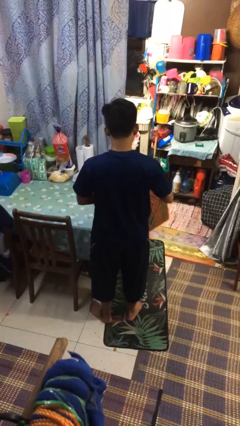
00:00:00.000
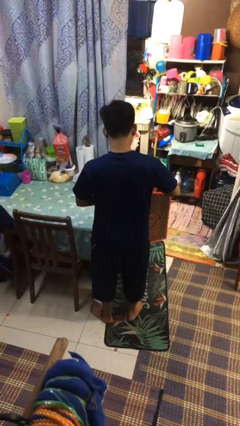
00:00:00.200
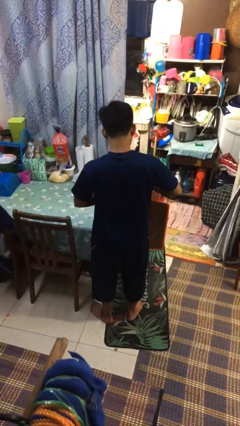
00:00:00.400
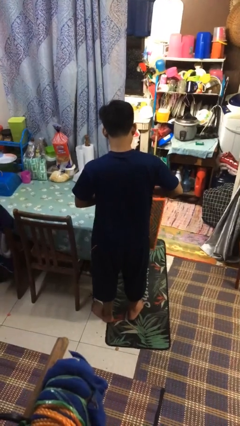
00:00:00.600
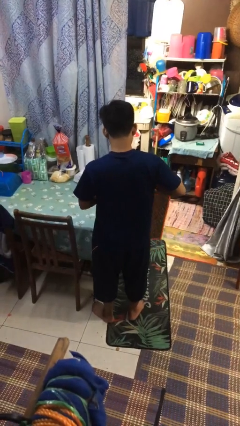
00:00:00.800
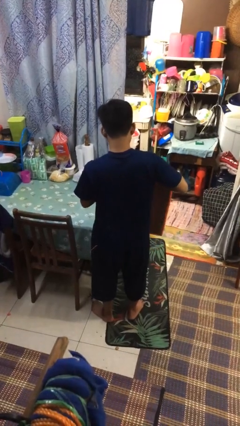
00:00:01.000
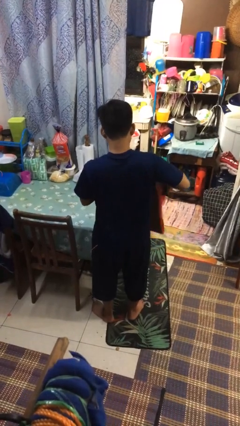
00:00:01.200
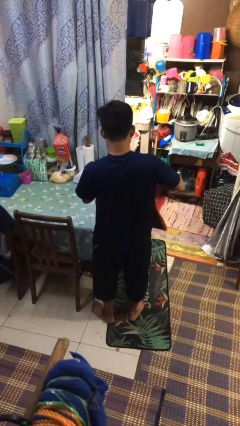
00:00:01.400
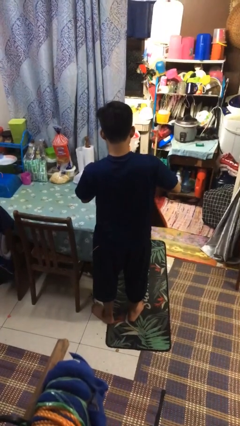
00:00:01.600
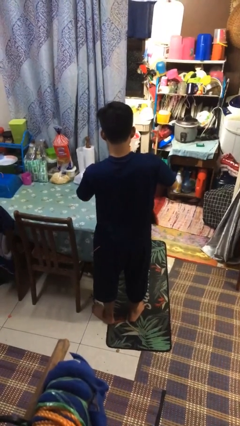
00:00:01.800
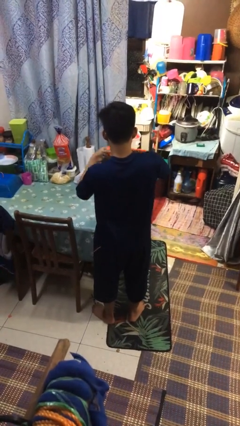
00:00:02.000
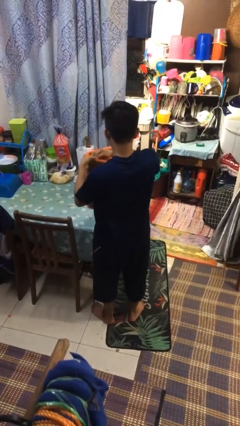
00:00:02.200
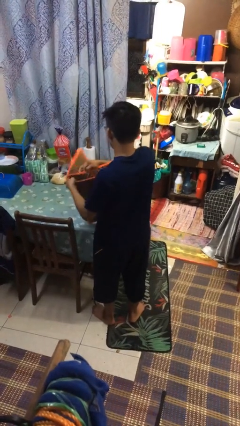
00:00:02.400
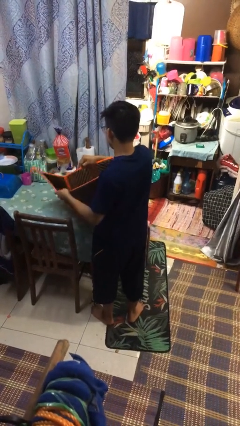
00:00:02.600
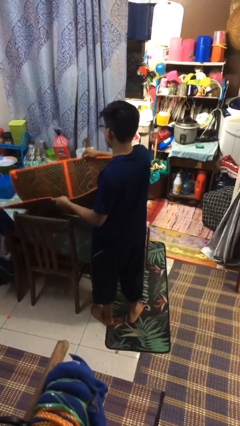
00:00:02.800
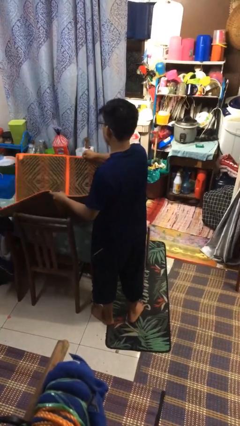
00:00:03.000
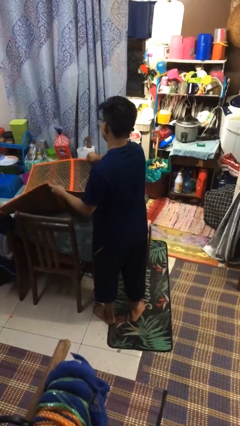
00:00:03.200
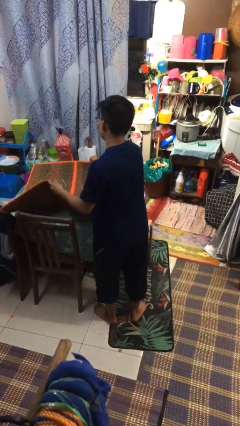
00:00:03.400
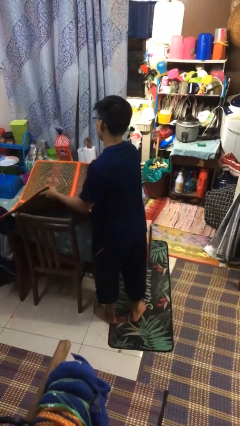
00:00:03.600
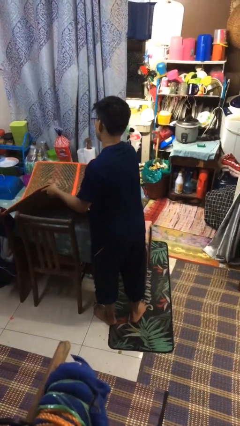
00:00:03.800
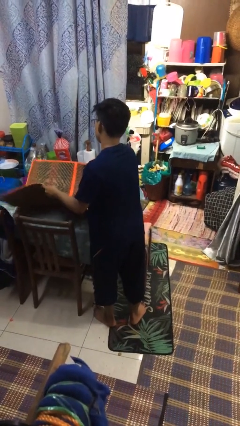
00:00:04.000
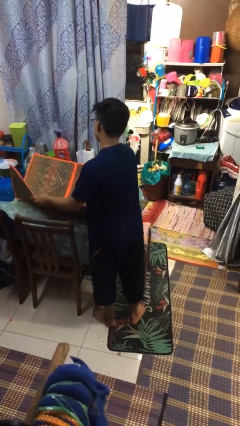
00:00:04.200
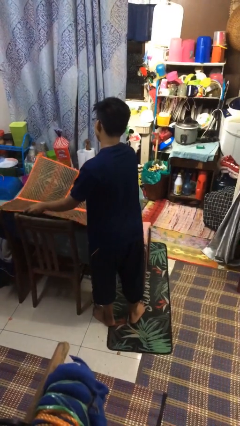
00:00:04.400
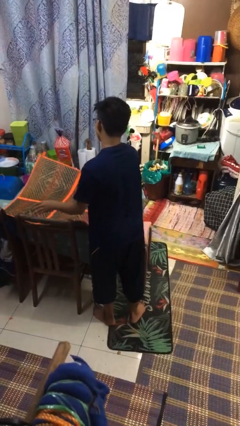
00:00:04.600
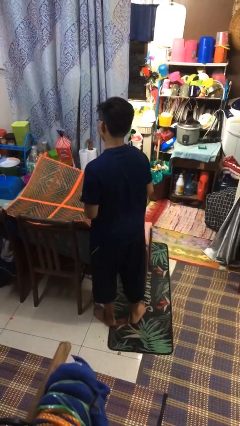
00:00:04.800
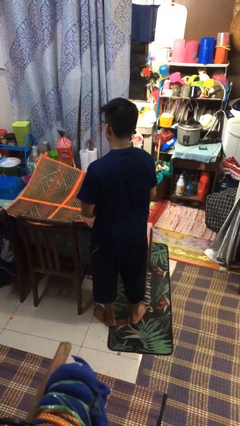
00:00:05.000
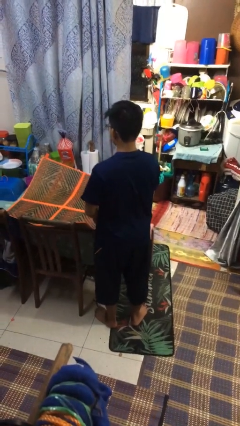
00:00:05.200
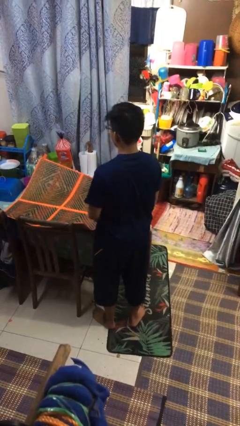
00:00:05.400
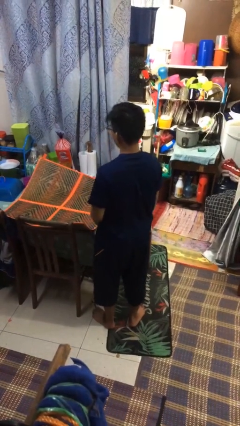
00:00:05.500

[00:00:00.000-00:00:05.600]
person spreads tablecloth

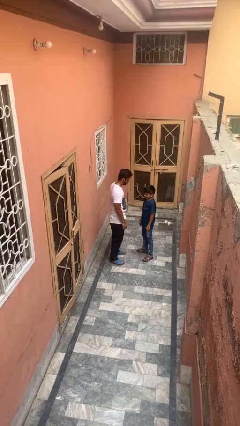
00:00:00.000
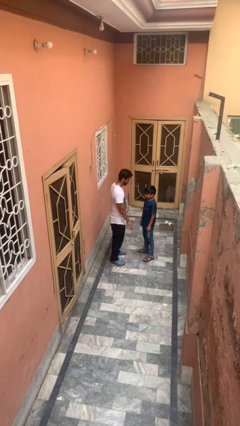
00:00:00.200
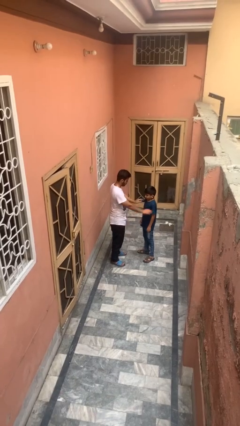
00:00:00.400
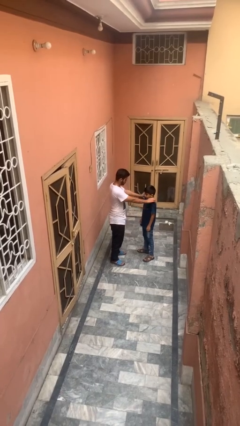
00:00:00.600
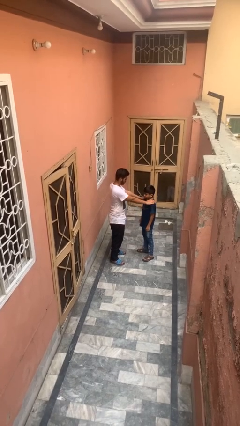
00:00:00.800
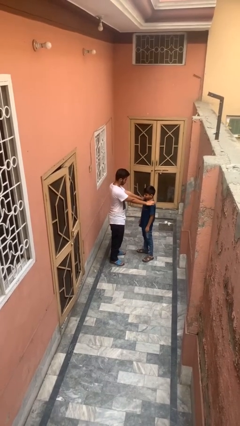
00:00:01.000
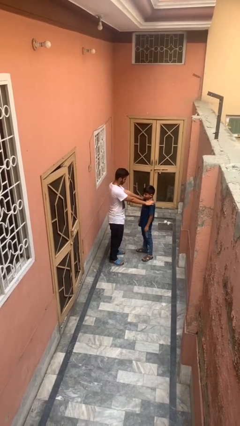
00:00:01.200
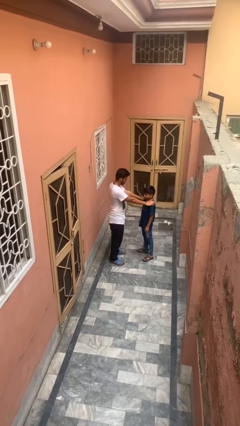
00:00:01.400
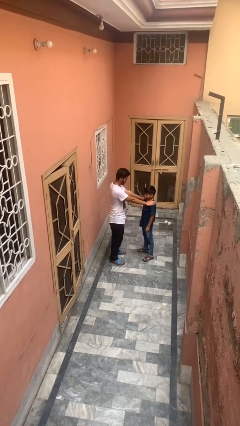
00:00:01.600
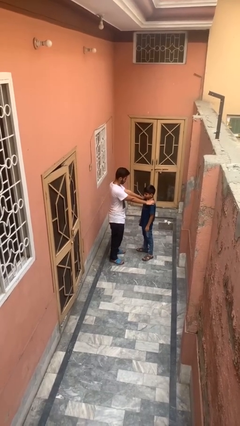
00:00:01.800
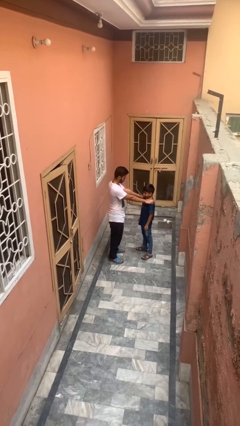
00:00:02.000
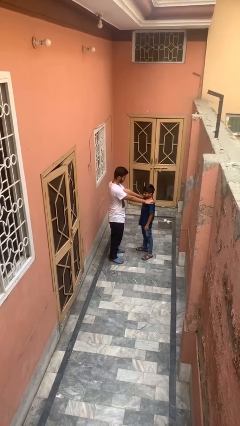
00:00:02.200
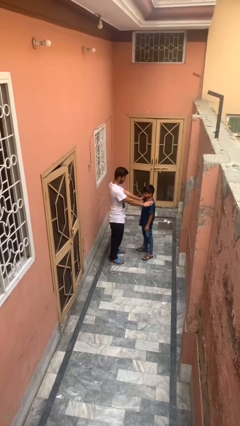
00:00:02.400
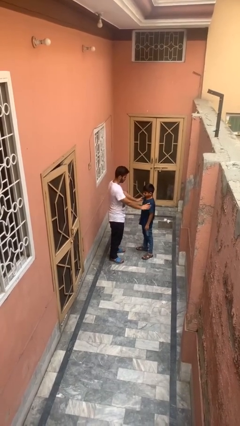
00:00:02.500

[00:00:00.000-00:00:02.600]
person pounds shoulders of person

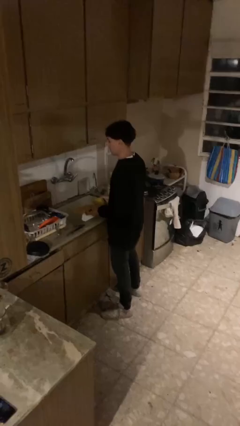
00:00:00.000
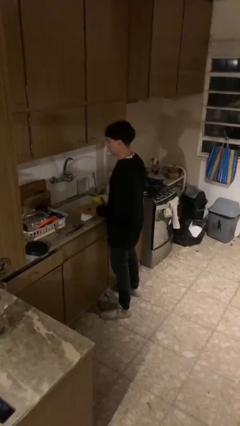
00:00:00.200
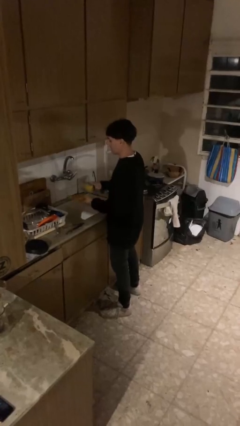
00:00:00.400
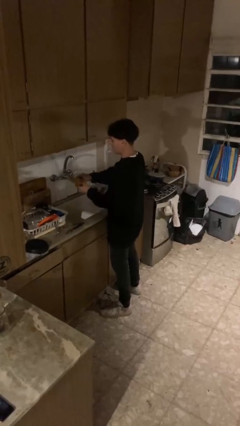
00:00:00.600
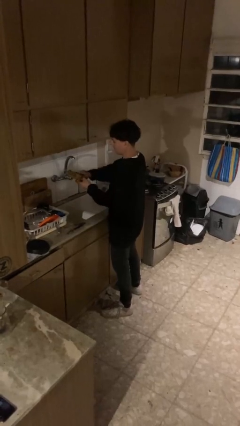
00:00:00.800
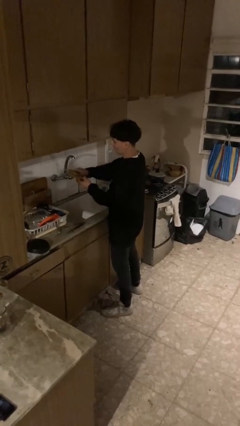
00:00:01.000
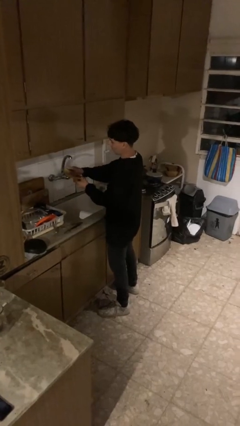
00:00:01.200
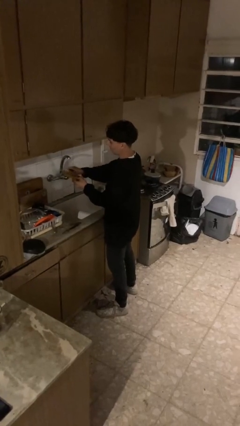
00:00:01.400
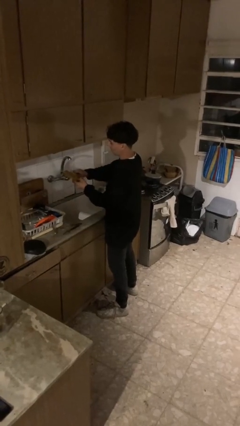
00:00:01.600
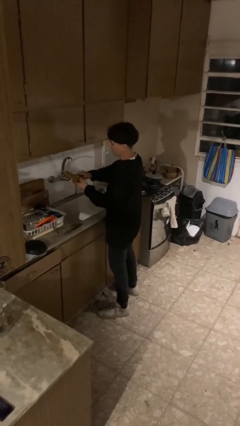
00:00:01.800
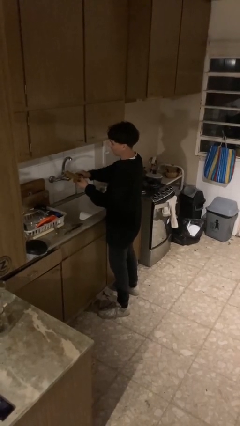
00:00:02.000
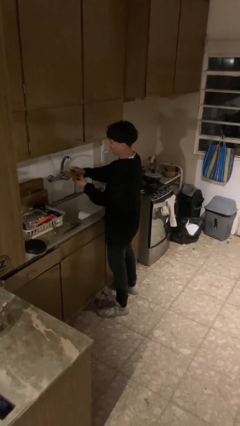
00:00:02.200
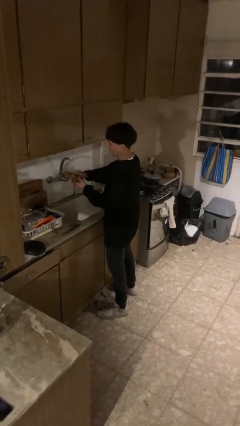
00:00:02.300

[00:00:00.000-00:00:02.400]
person washes dish

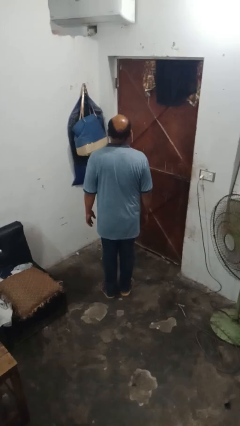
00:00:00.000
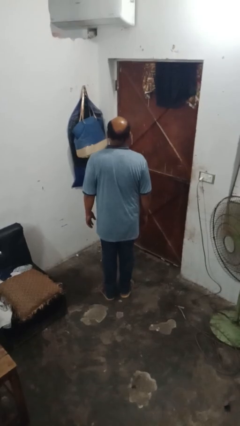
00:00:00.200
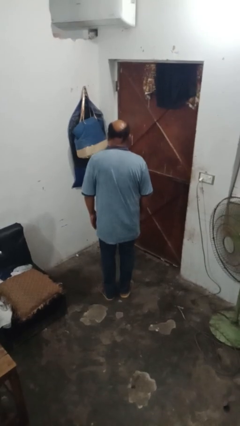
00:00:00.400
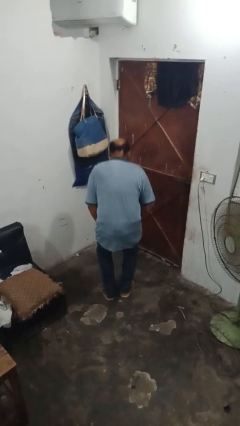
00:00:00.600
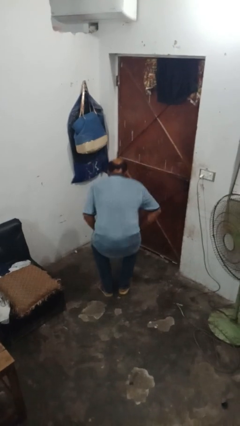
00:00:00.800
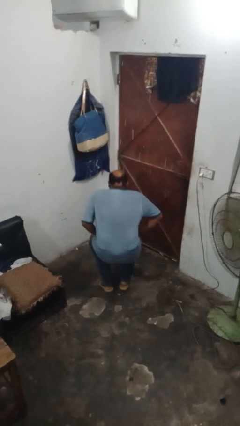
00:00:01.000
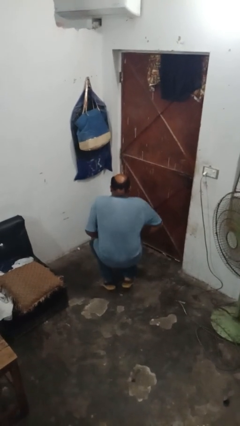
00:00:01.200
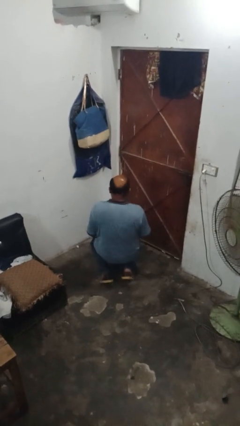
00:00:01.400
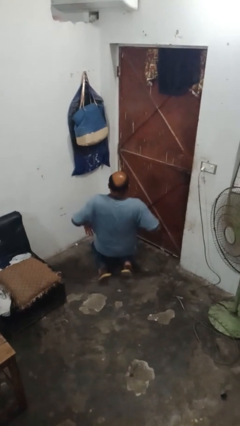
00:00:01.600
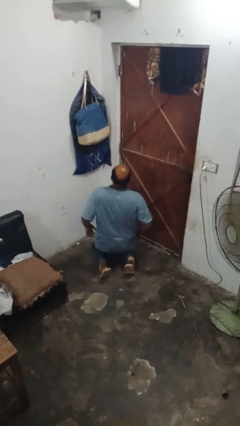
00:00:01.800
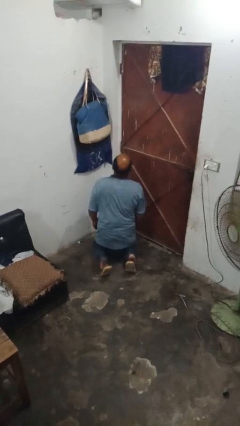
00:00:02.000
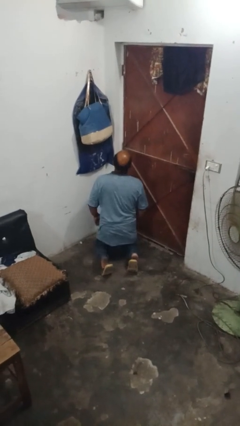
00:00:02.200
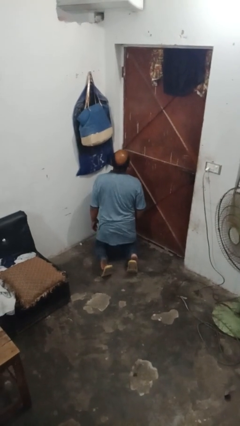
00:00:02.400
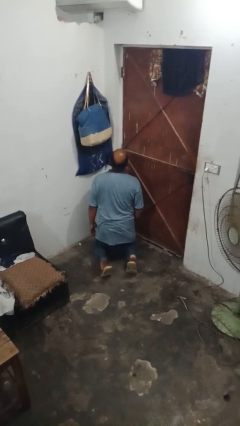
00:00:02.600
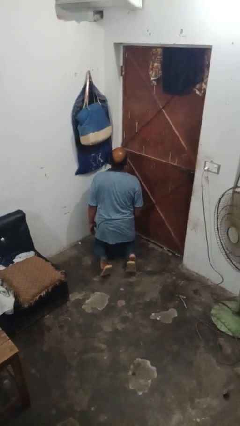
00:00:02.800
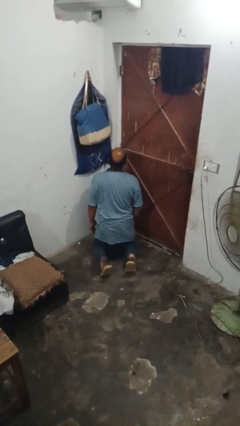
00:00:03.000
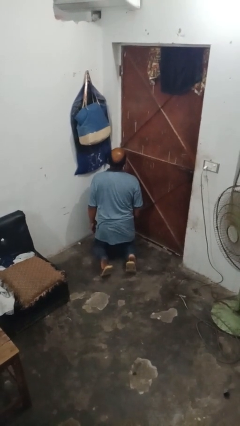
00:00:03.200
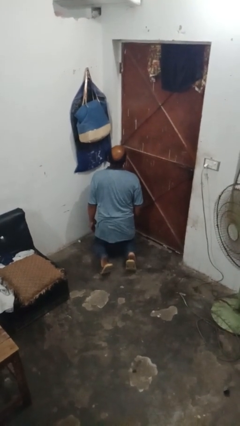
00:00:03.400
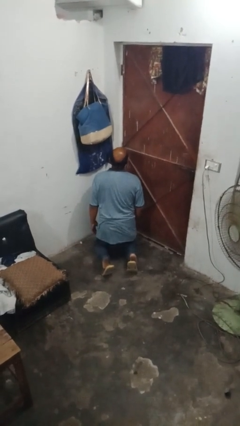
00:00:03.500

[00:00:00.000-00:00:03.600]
person squats

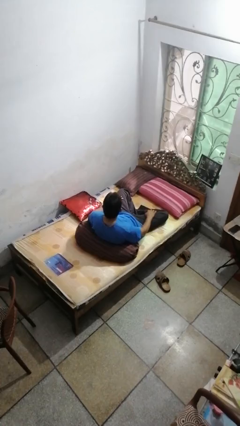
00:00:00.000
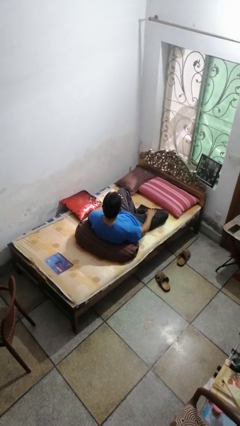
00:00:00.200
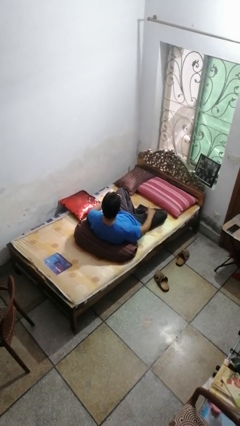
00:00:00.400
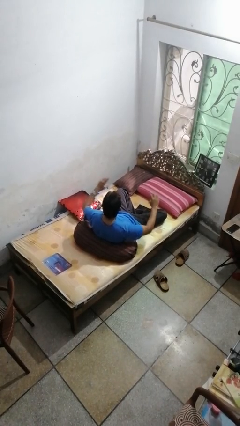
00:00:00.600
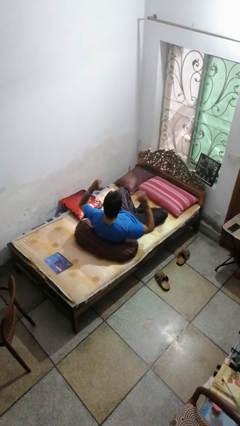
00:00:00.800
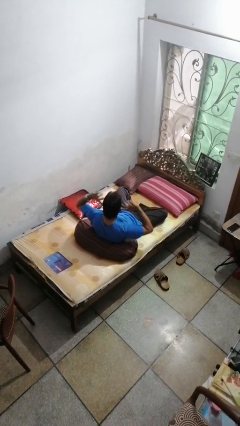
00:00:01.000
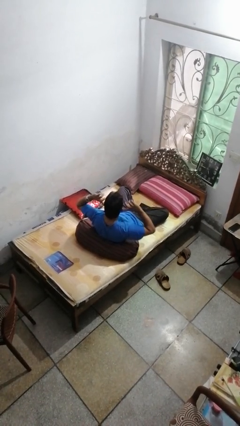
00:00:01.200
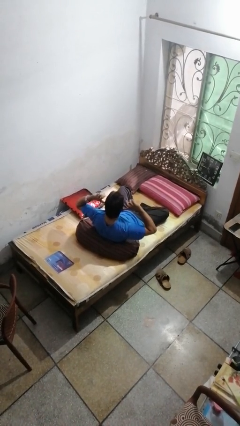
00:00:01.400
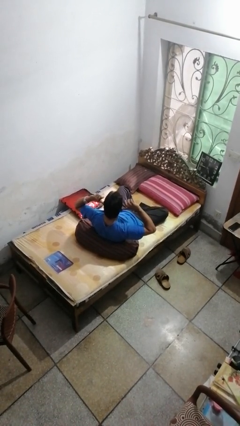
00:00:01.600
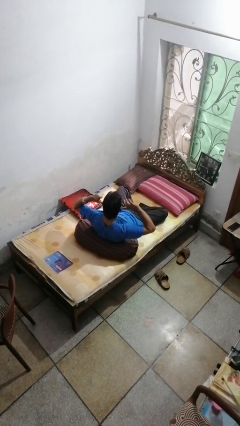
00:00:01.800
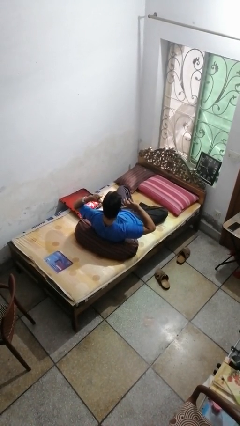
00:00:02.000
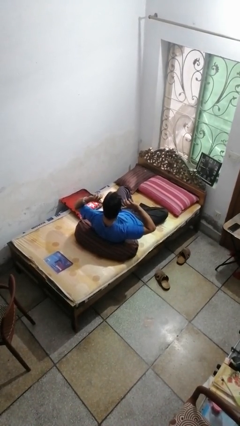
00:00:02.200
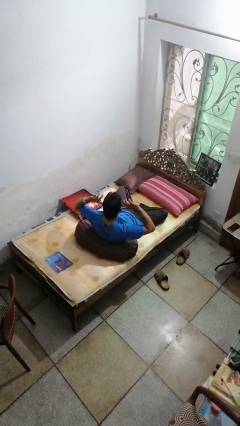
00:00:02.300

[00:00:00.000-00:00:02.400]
person puts fingers in ear

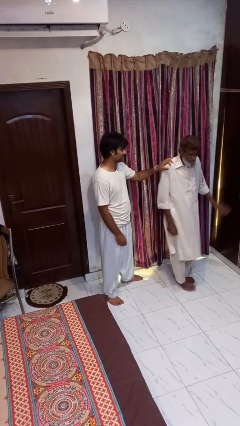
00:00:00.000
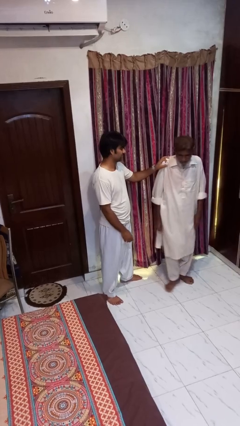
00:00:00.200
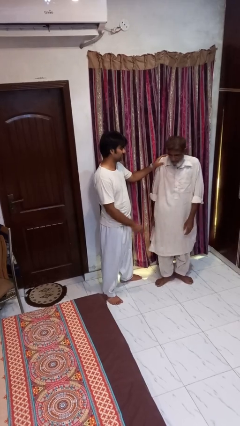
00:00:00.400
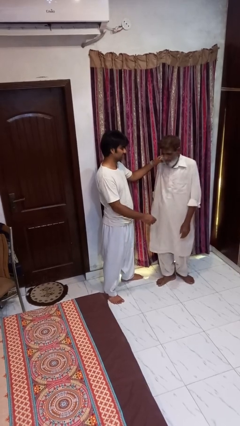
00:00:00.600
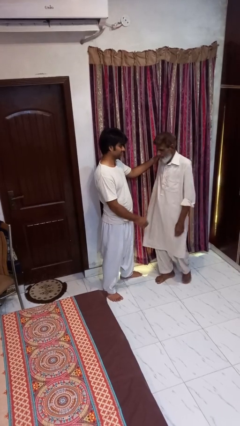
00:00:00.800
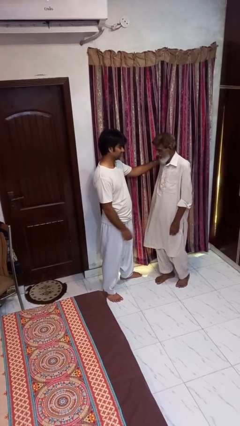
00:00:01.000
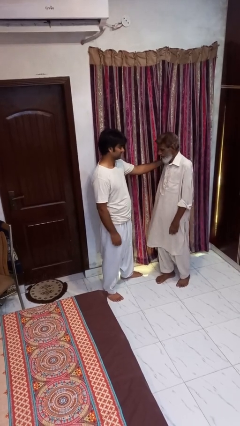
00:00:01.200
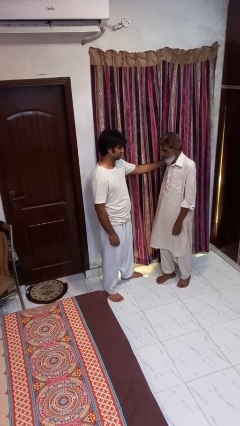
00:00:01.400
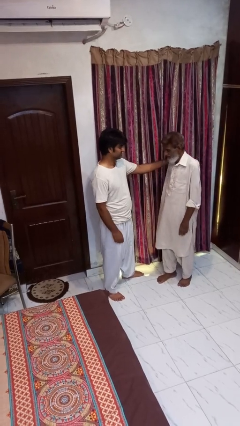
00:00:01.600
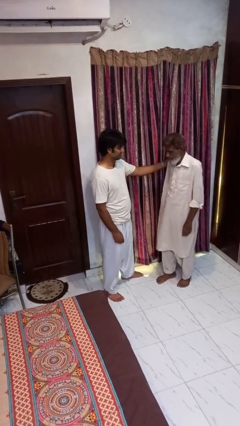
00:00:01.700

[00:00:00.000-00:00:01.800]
person spins person around
